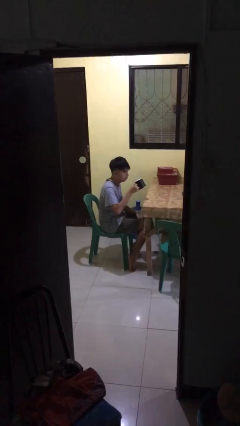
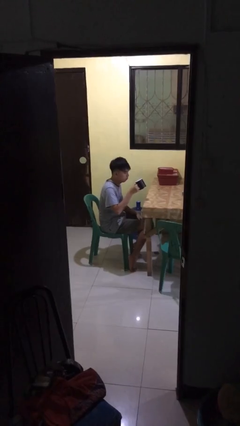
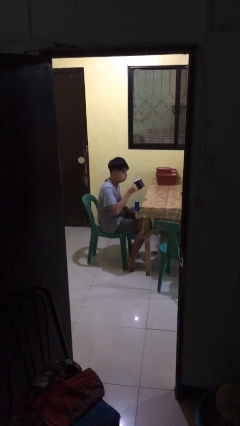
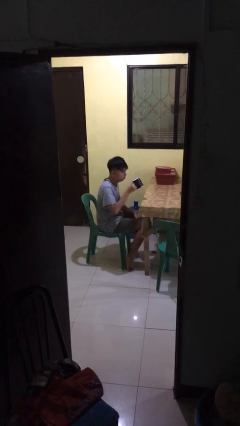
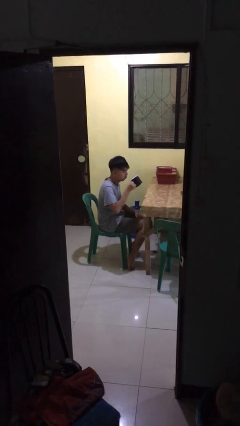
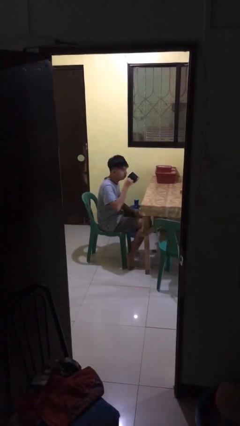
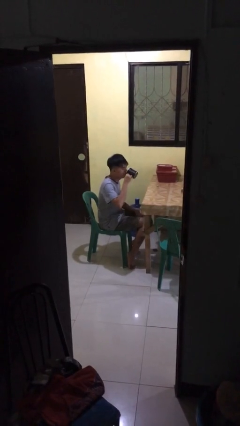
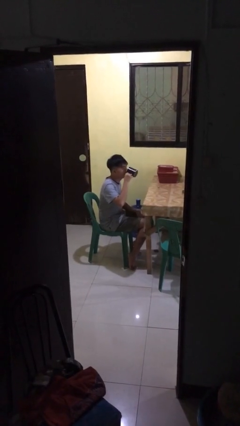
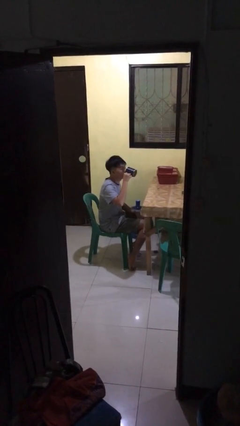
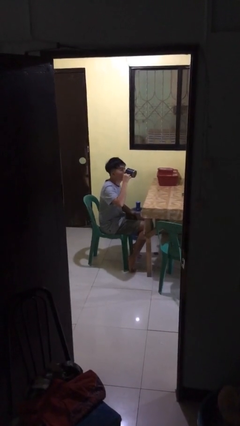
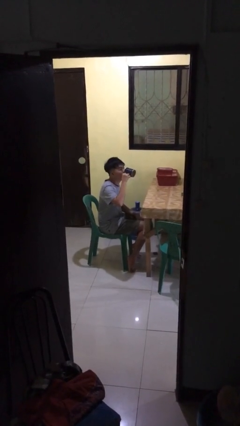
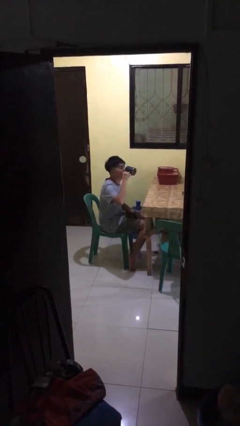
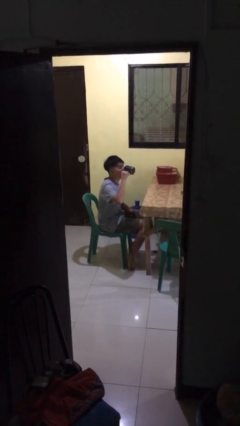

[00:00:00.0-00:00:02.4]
person drinks from mug

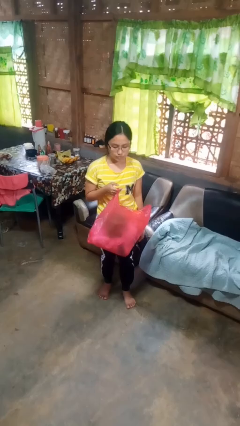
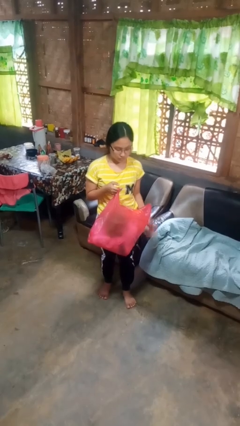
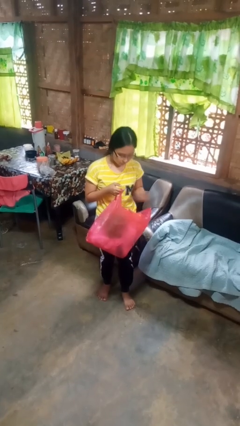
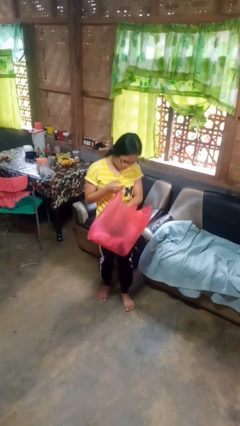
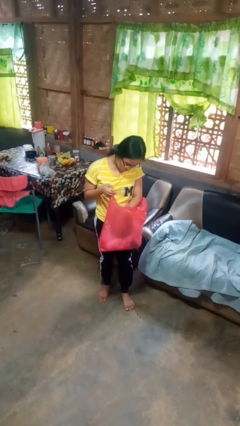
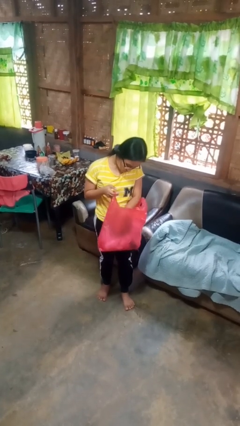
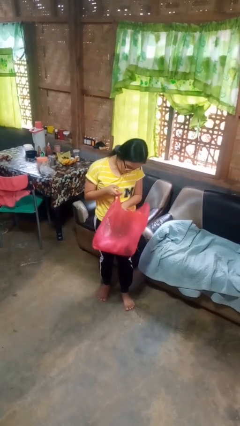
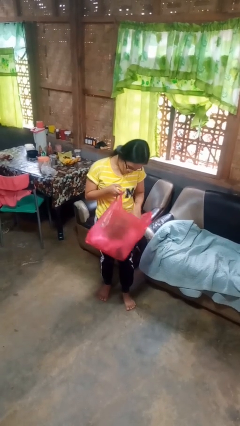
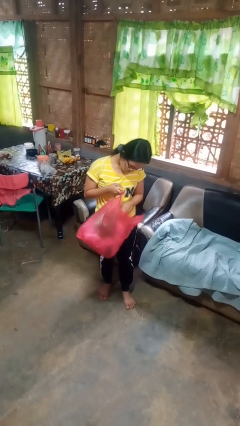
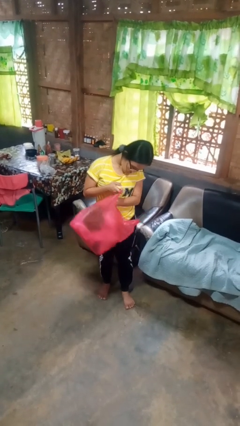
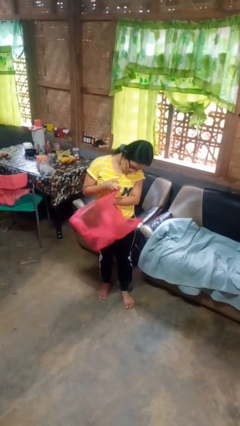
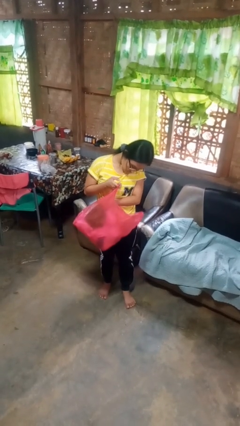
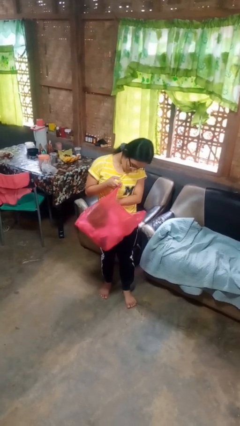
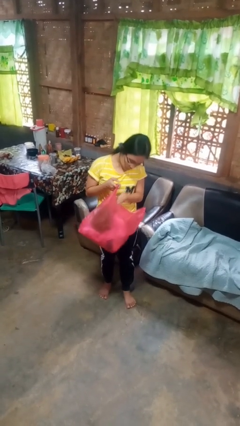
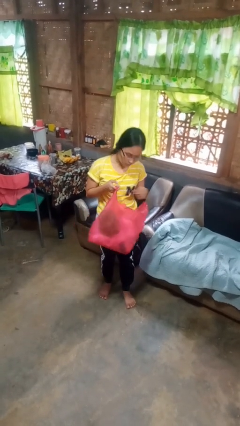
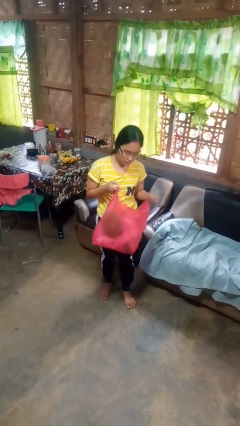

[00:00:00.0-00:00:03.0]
person searches in bag

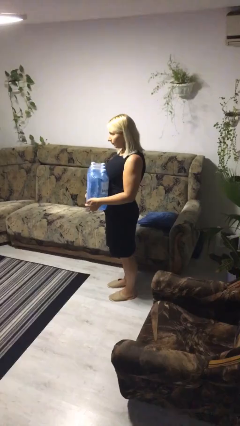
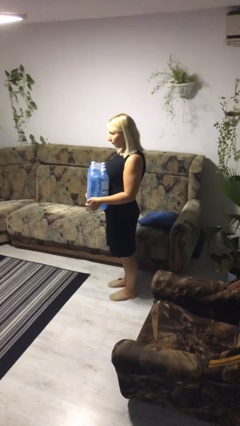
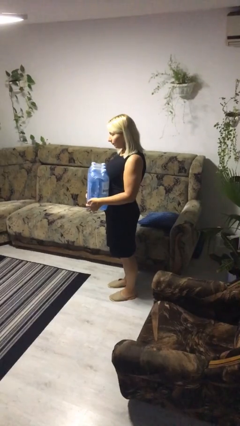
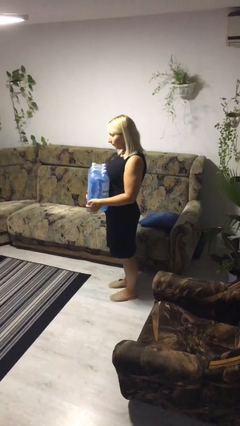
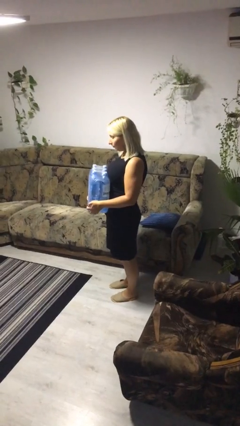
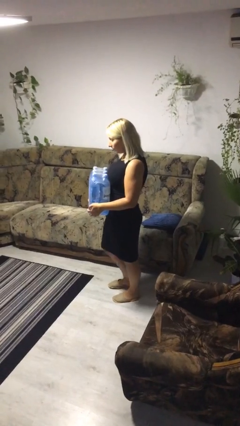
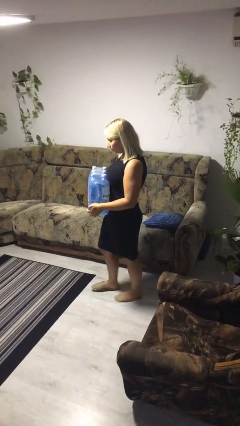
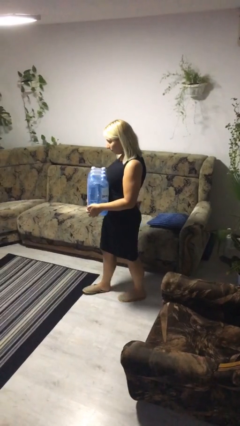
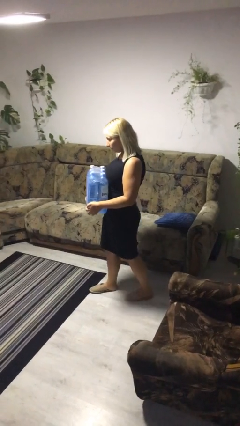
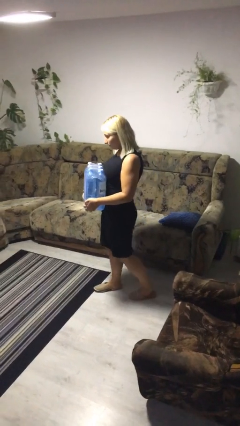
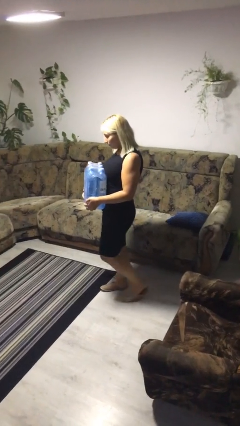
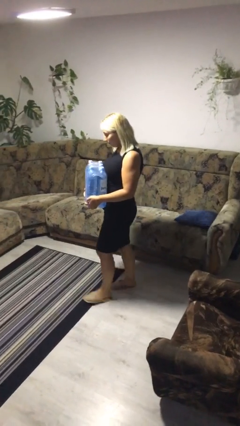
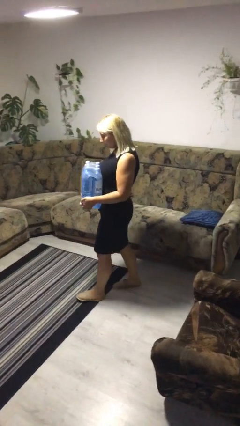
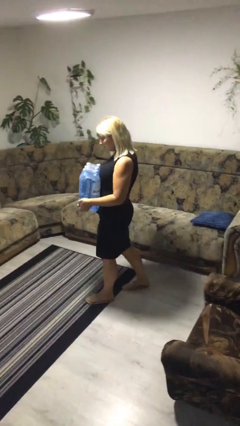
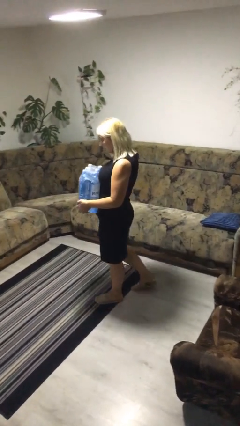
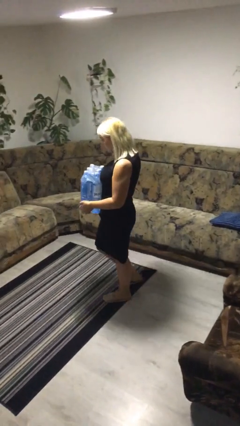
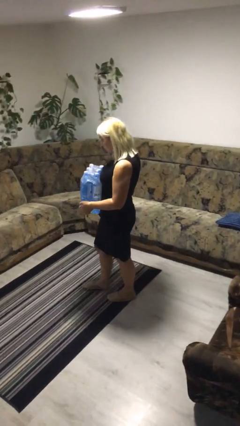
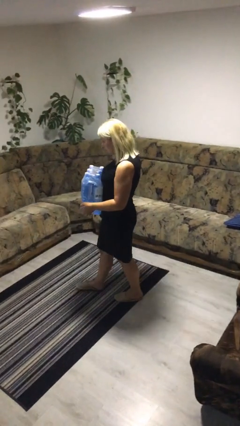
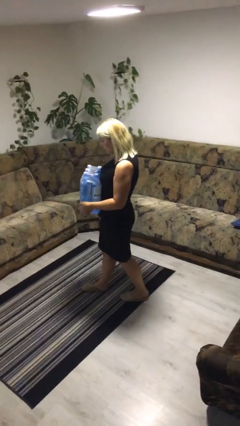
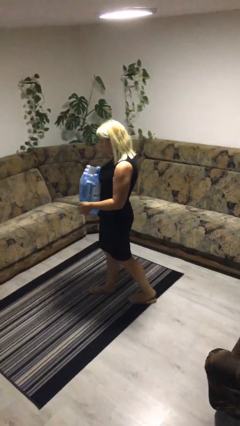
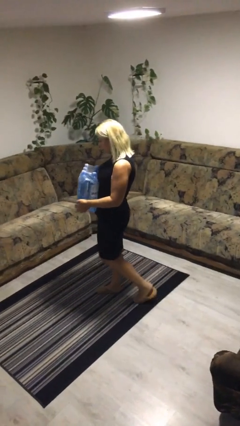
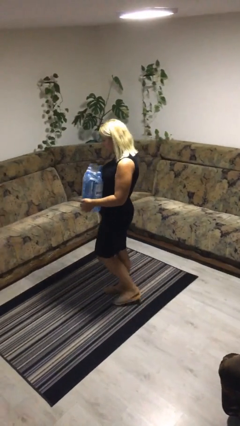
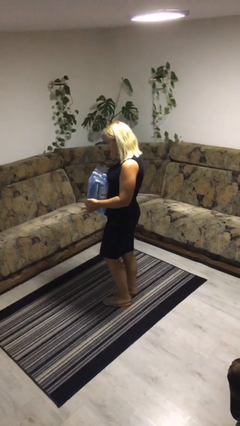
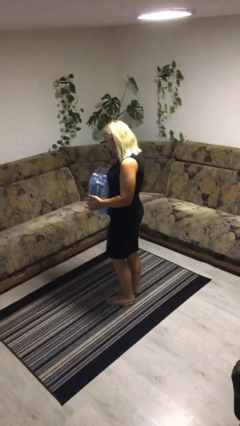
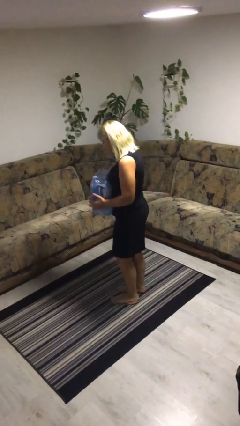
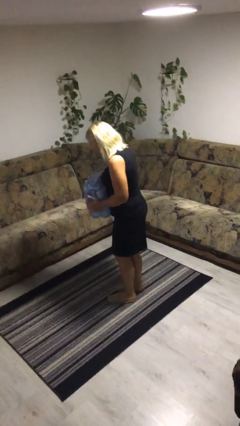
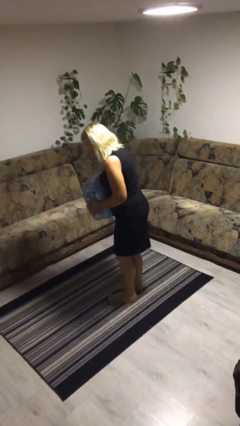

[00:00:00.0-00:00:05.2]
person carries heavy object

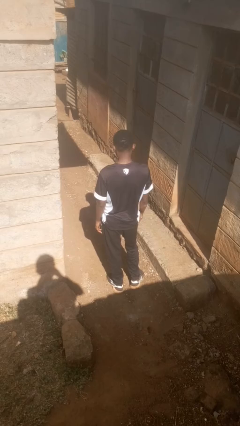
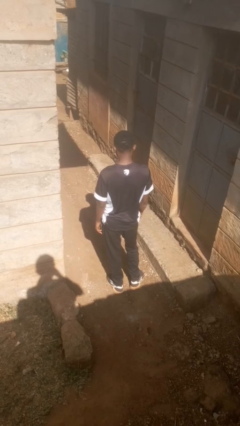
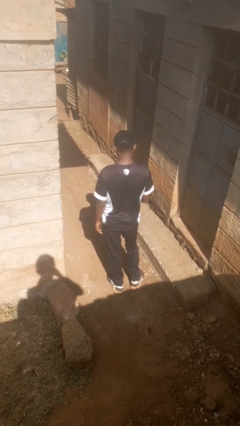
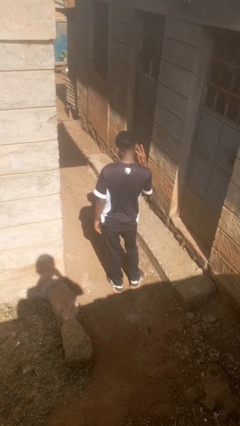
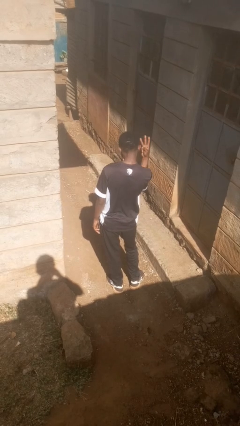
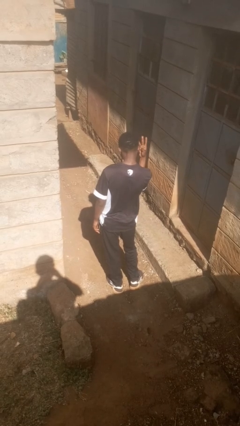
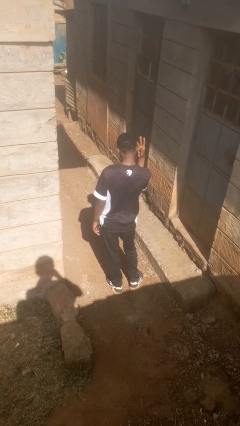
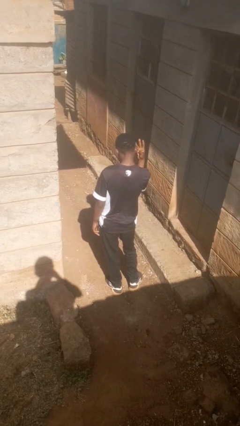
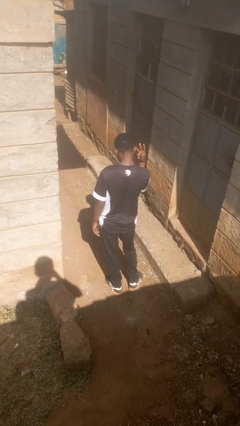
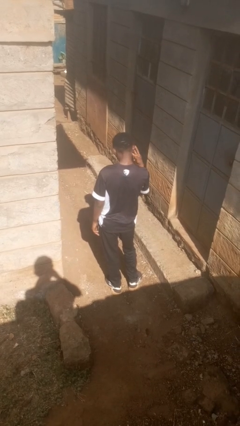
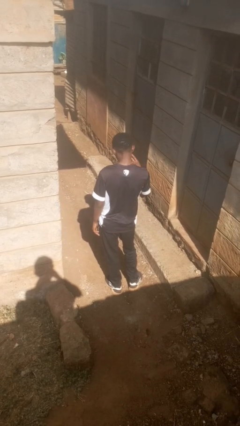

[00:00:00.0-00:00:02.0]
person gestures number three

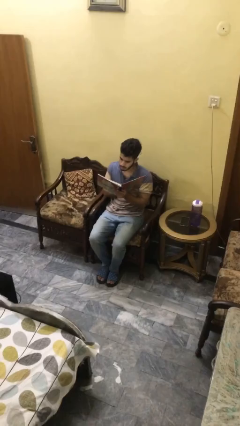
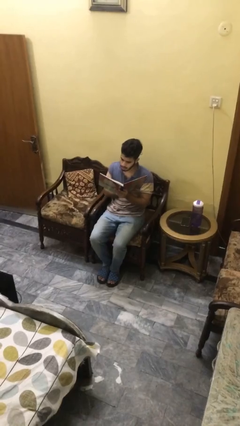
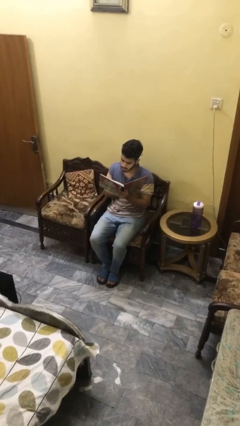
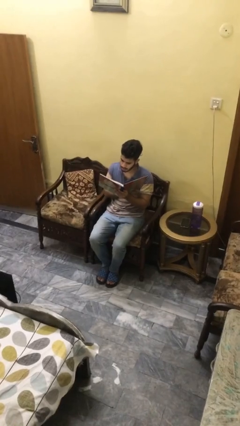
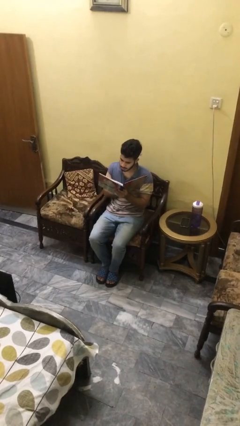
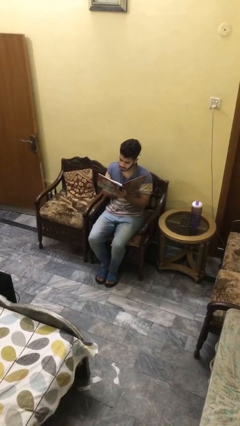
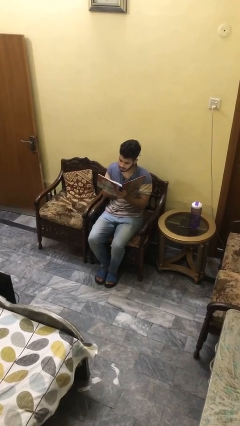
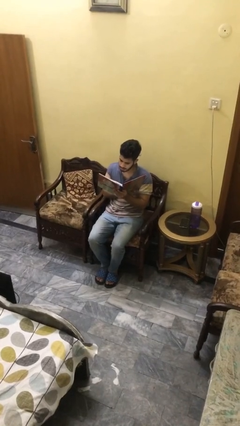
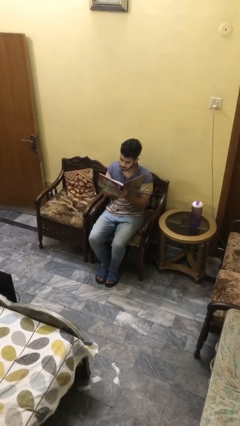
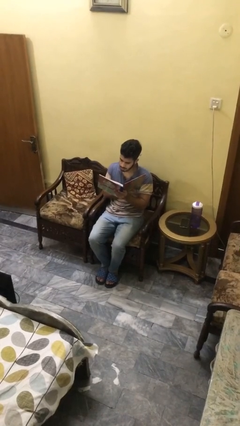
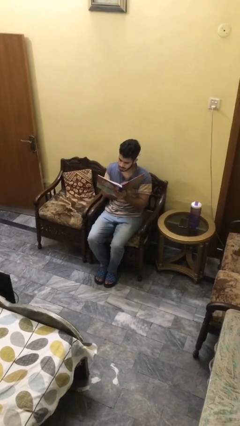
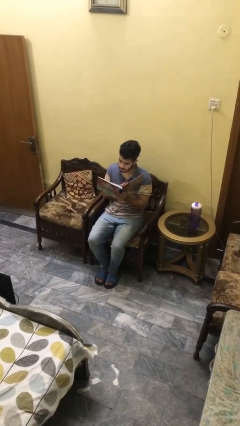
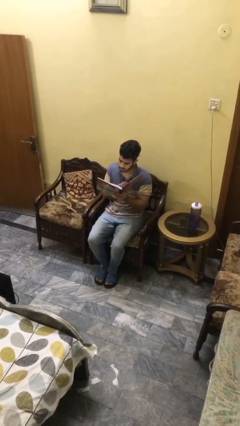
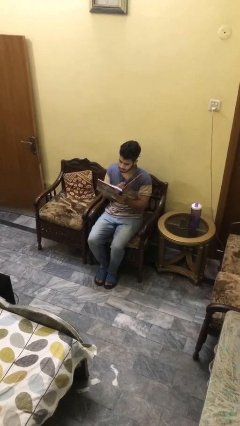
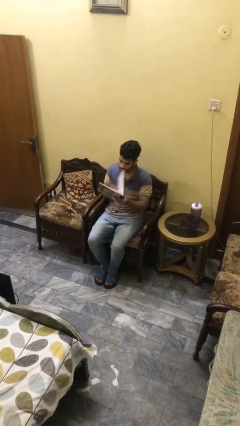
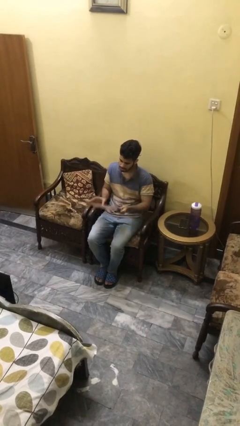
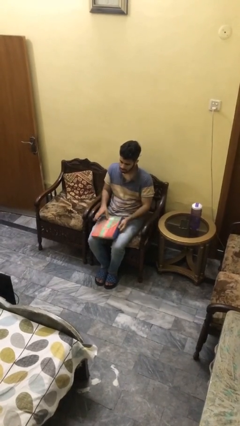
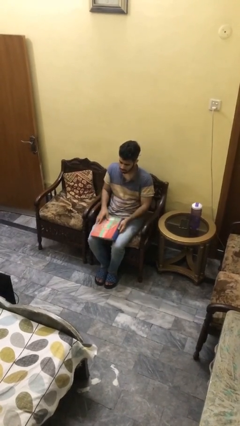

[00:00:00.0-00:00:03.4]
person reads document

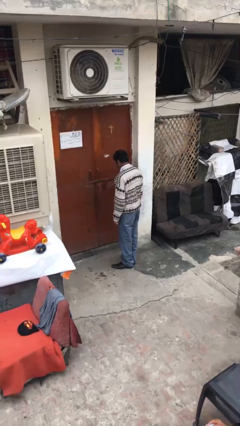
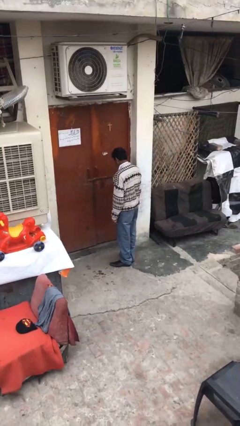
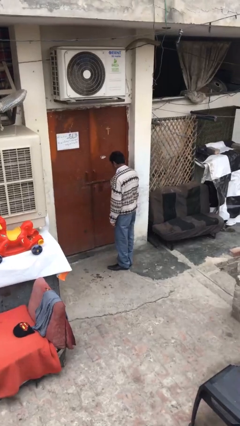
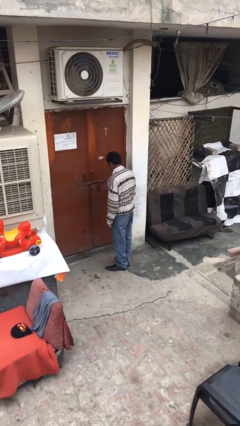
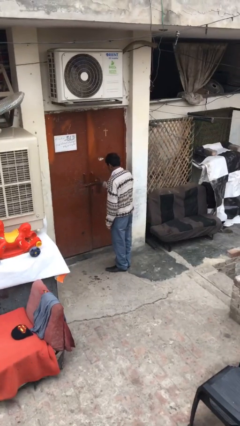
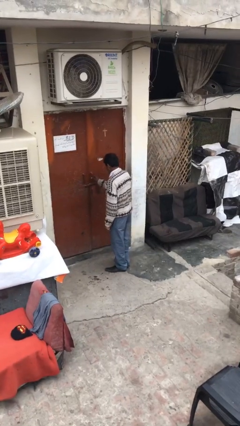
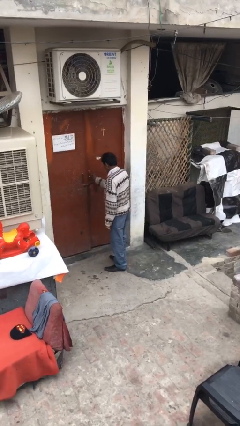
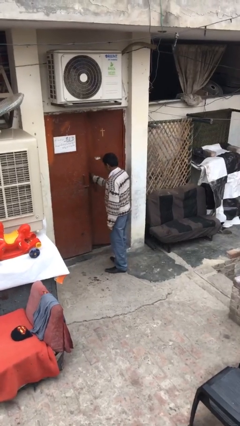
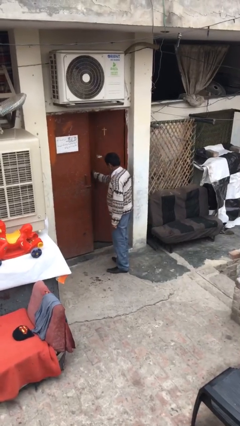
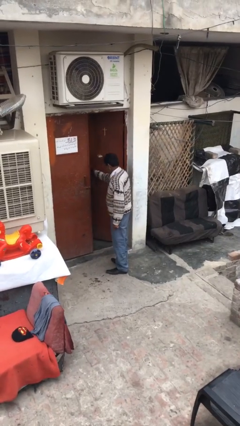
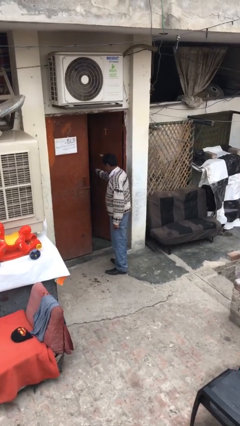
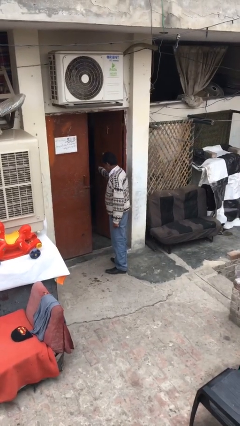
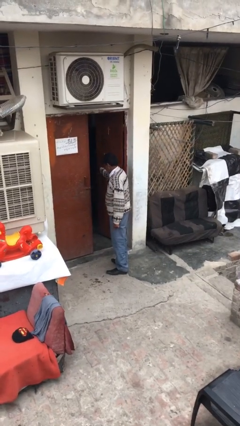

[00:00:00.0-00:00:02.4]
person opens facility door
